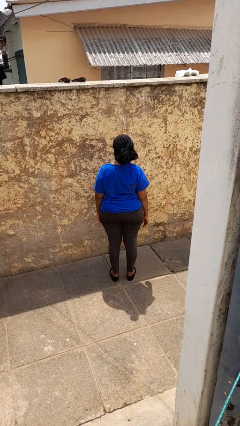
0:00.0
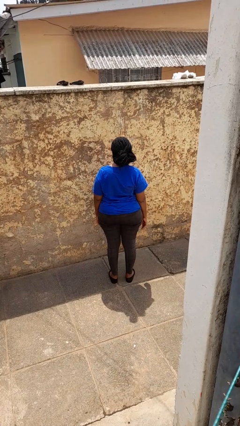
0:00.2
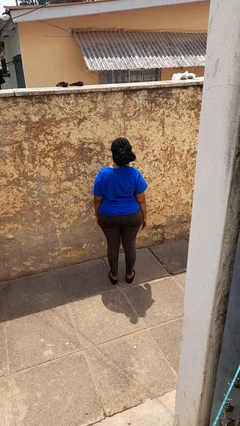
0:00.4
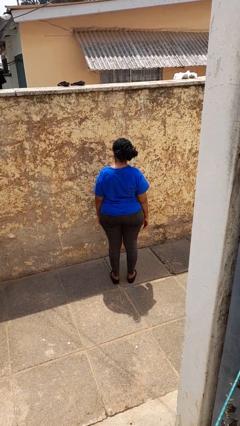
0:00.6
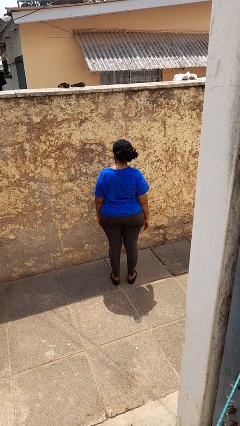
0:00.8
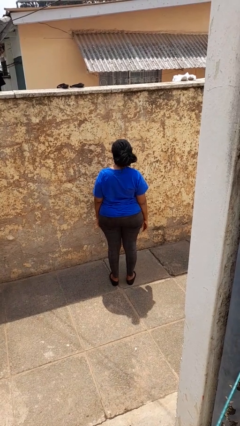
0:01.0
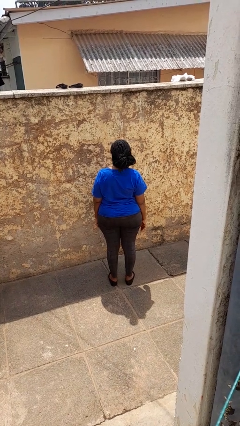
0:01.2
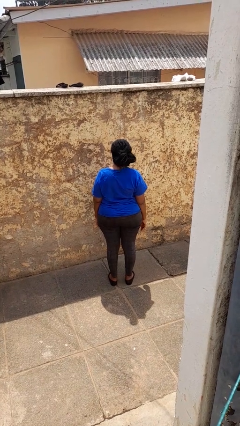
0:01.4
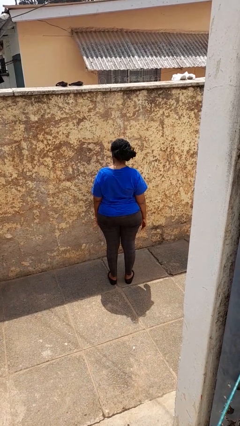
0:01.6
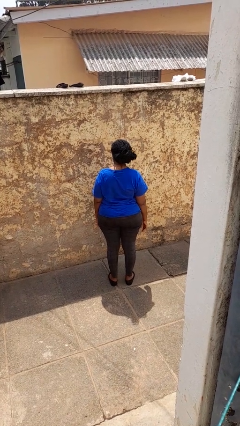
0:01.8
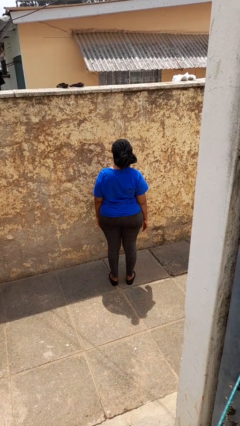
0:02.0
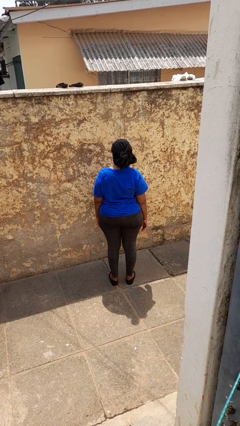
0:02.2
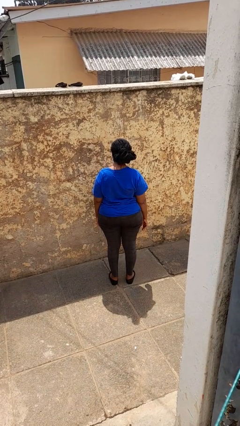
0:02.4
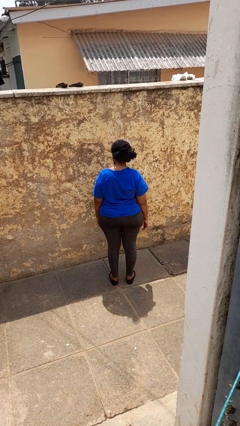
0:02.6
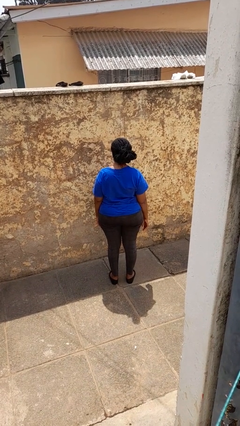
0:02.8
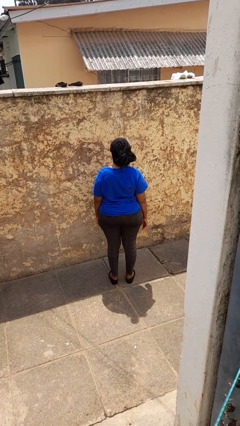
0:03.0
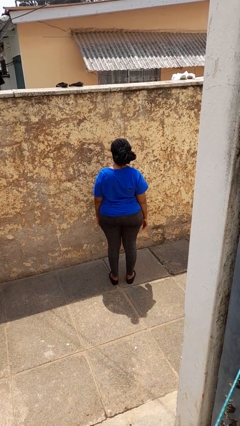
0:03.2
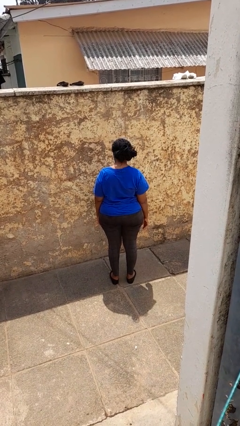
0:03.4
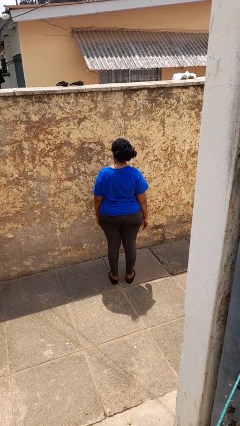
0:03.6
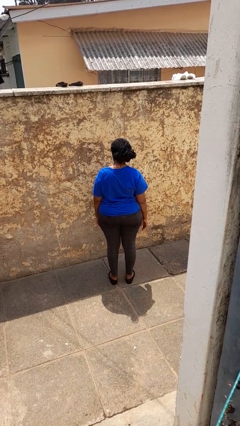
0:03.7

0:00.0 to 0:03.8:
person nods head

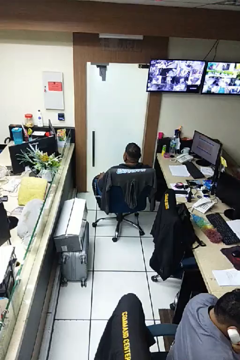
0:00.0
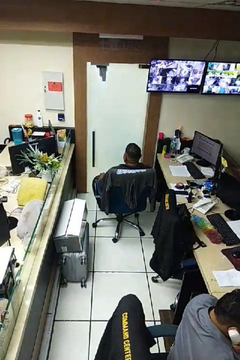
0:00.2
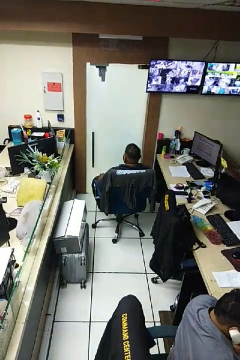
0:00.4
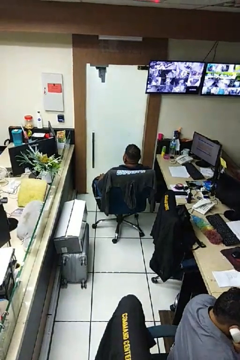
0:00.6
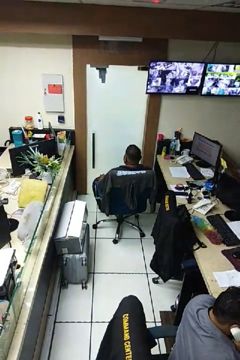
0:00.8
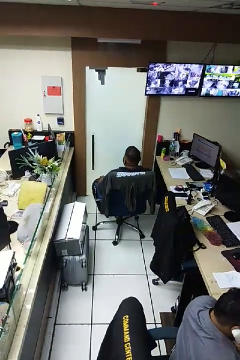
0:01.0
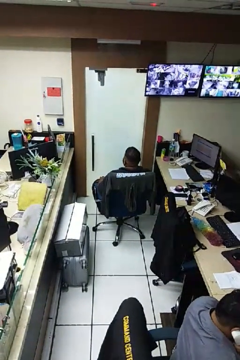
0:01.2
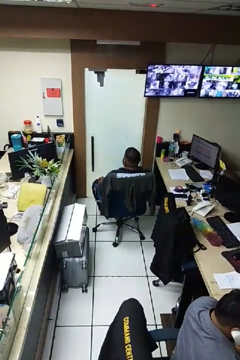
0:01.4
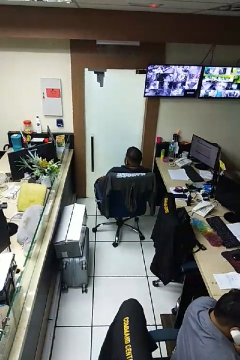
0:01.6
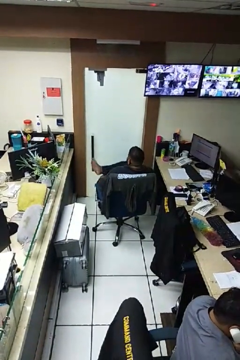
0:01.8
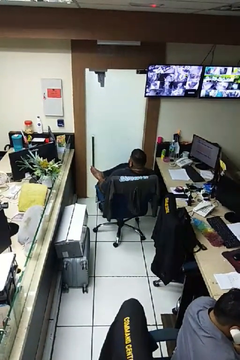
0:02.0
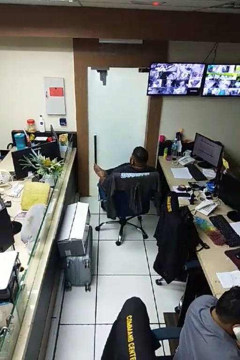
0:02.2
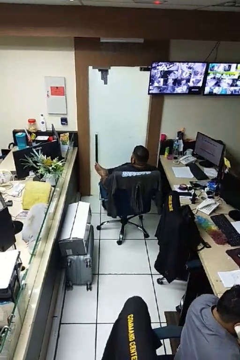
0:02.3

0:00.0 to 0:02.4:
person crosses legs

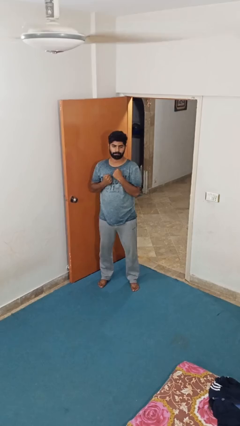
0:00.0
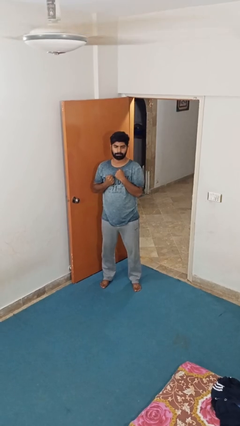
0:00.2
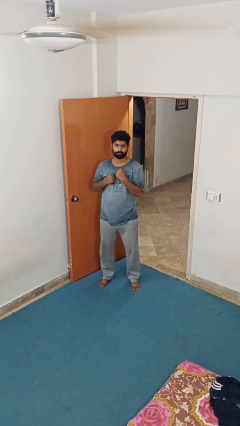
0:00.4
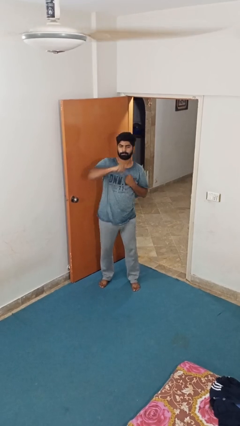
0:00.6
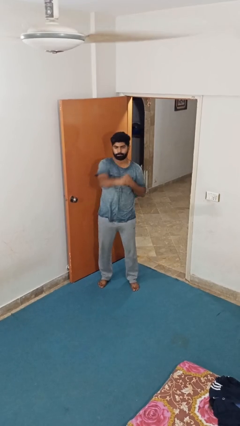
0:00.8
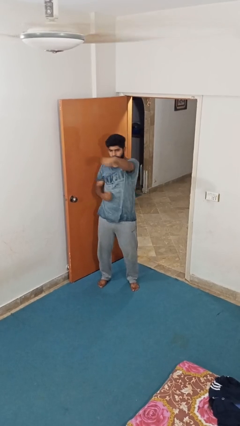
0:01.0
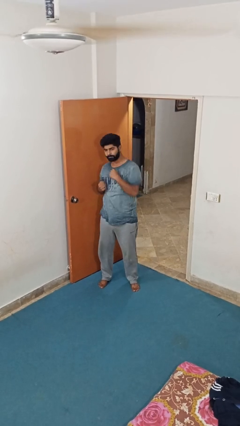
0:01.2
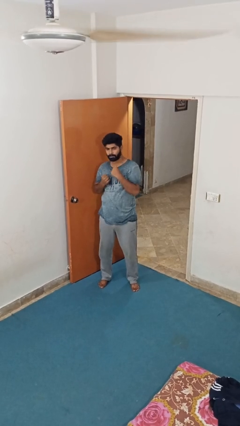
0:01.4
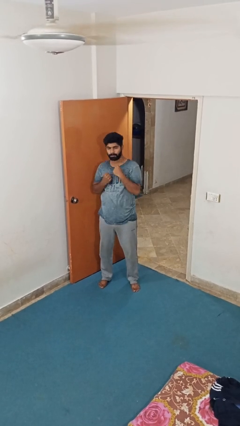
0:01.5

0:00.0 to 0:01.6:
person punches

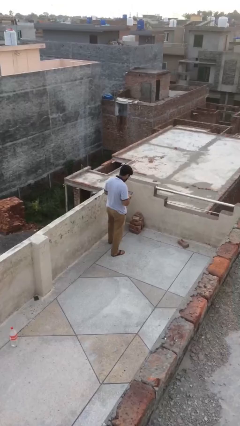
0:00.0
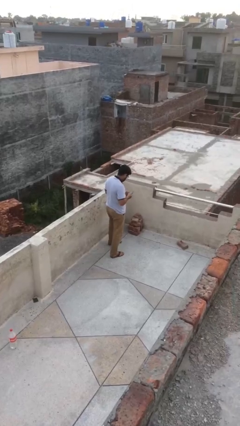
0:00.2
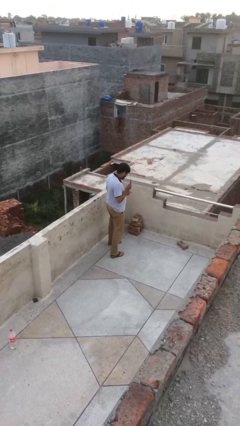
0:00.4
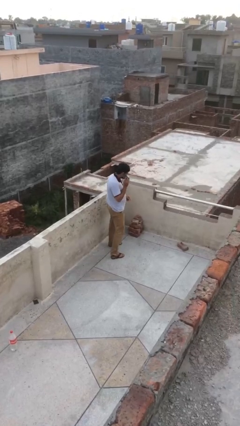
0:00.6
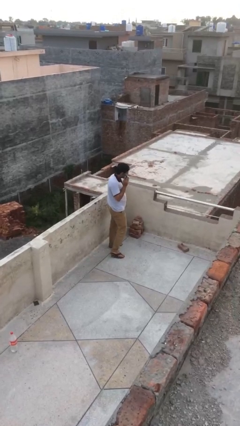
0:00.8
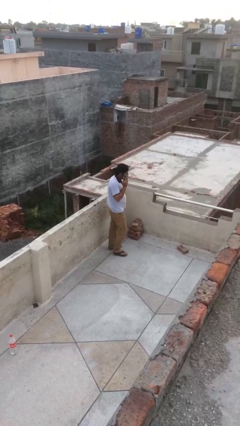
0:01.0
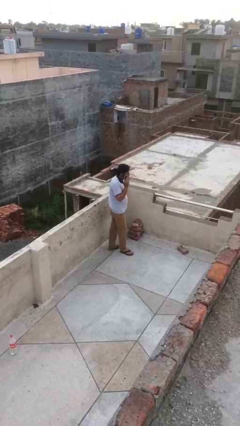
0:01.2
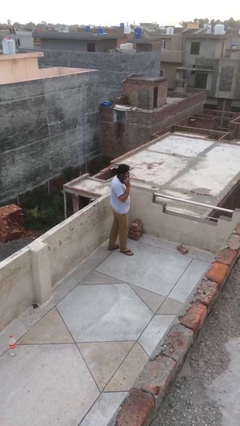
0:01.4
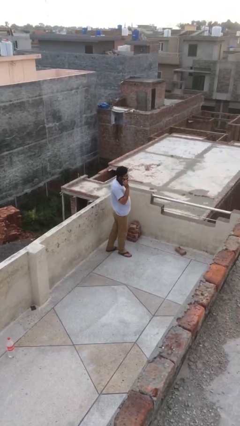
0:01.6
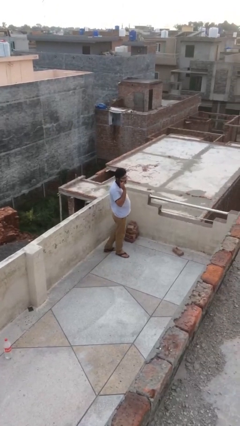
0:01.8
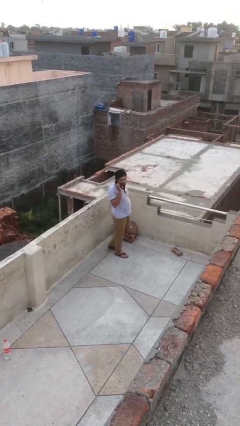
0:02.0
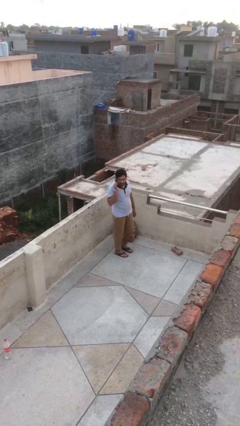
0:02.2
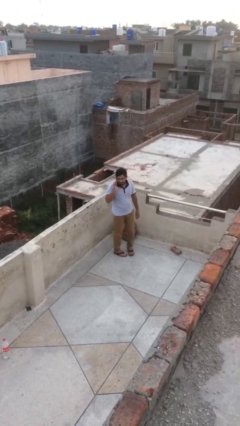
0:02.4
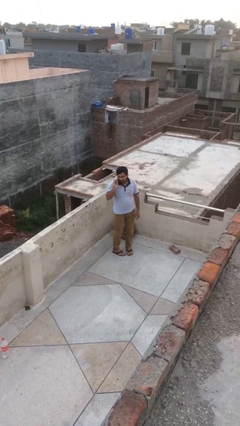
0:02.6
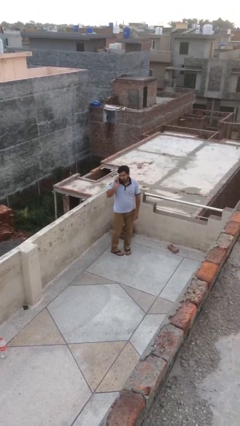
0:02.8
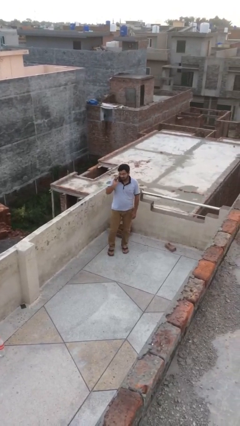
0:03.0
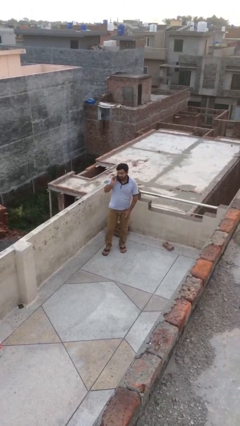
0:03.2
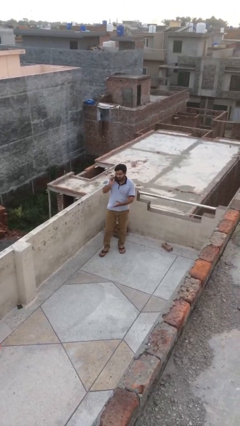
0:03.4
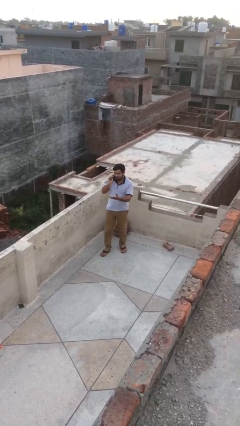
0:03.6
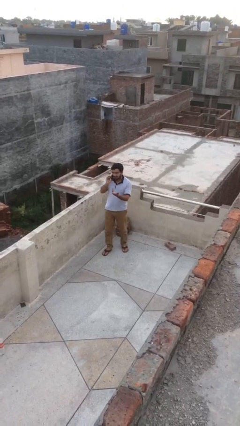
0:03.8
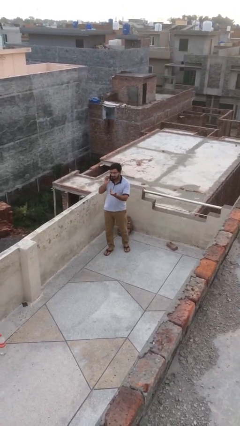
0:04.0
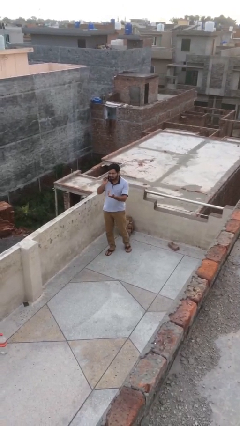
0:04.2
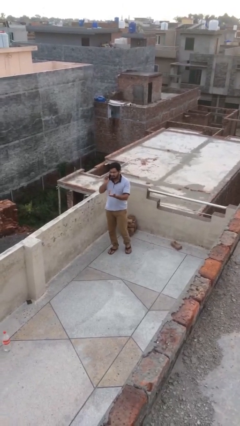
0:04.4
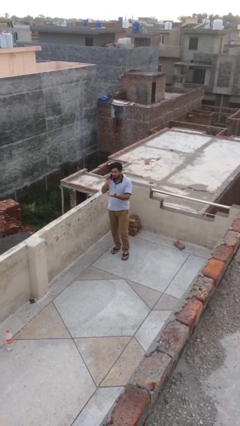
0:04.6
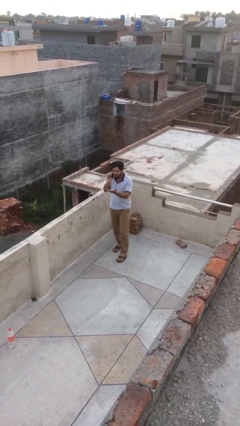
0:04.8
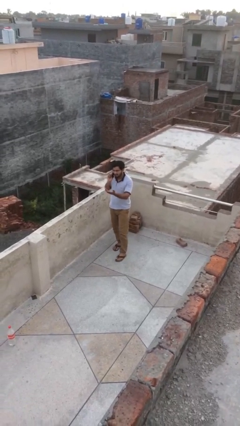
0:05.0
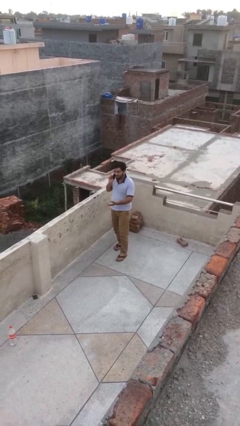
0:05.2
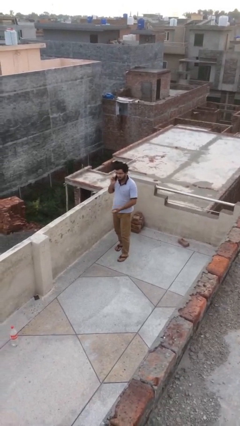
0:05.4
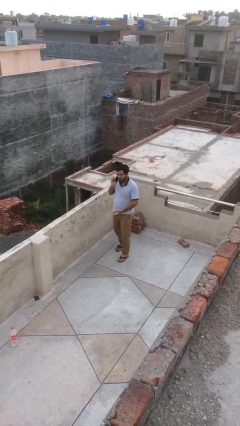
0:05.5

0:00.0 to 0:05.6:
person talks on phone

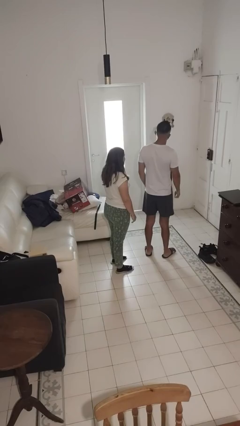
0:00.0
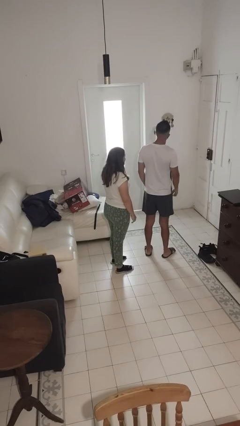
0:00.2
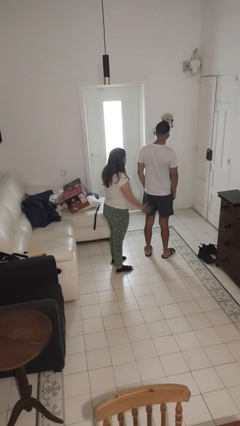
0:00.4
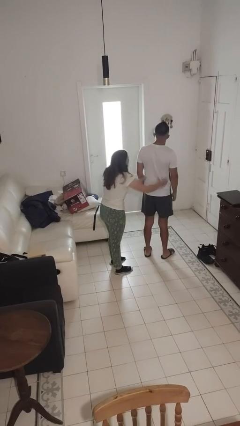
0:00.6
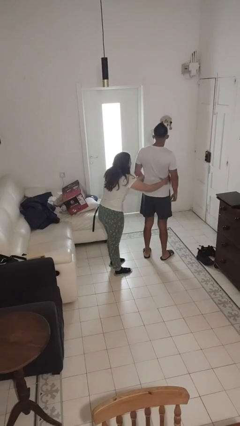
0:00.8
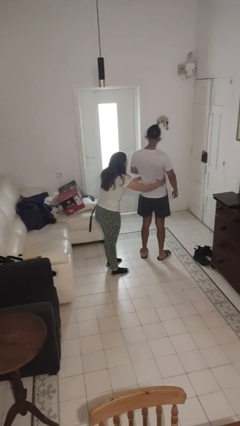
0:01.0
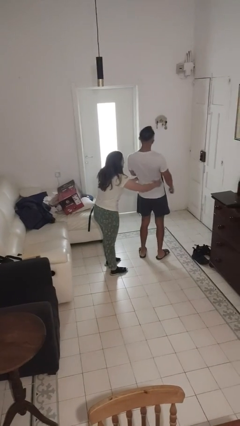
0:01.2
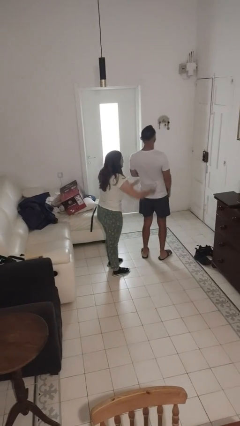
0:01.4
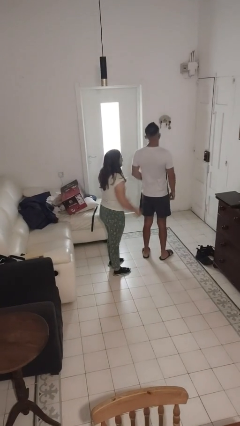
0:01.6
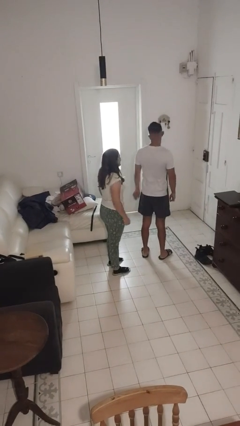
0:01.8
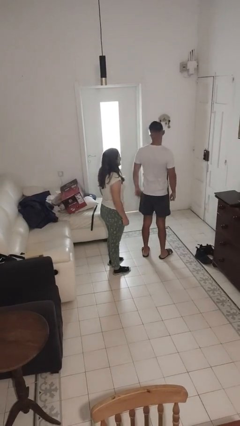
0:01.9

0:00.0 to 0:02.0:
person tickles person

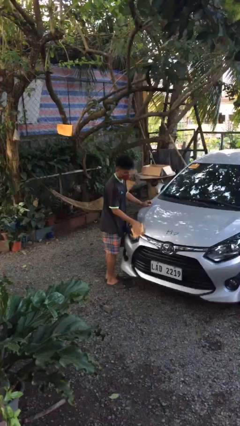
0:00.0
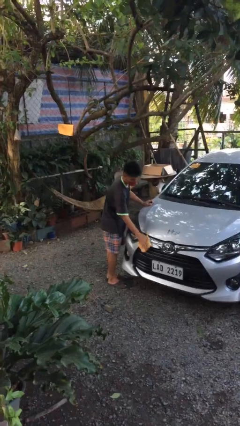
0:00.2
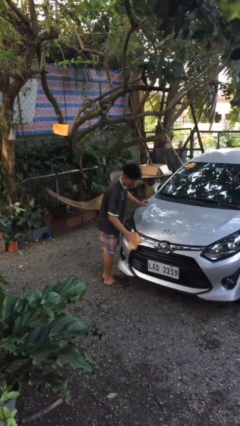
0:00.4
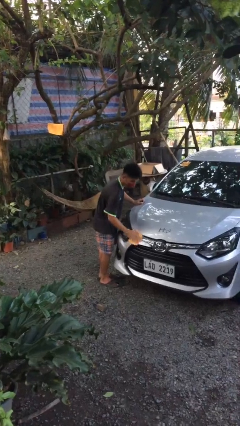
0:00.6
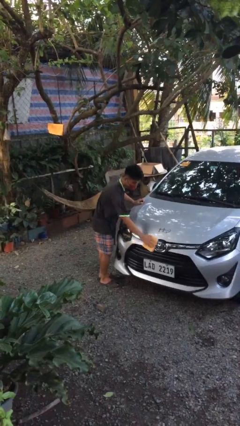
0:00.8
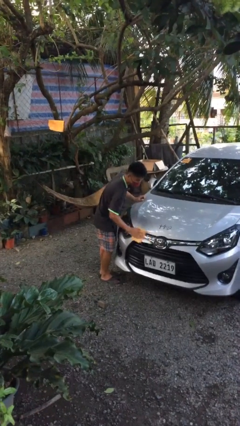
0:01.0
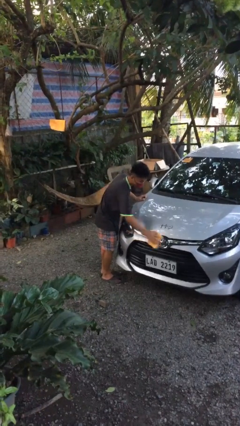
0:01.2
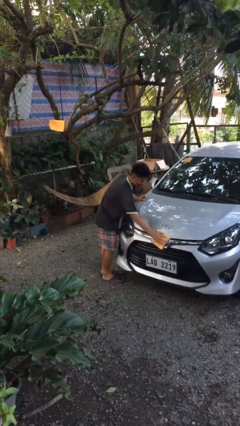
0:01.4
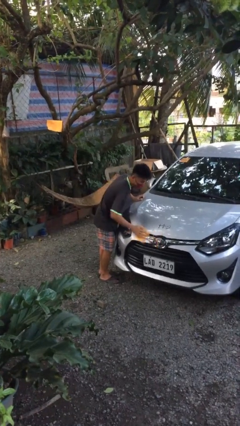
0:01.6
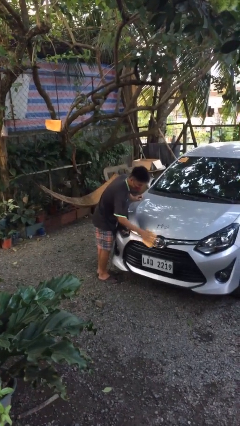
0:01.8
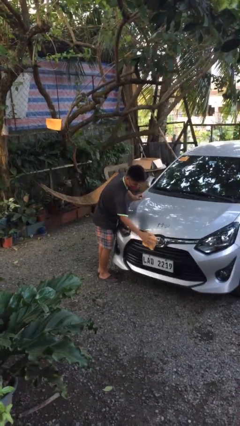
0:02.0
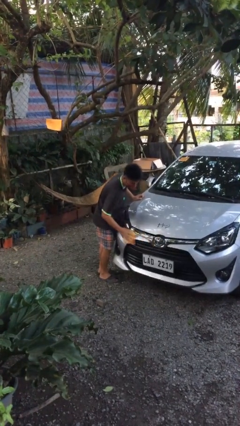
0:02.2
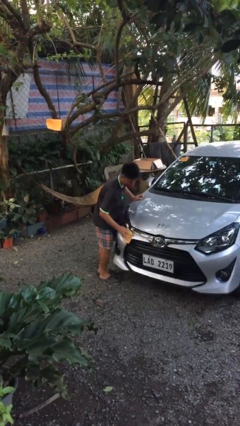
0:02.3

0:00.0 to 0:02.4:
person polishes car with rag

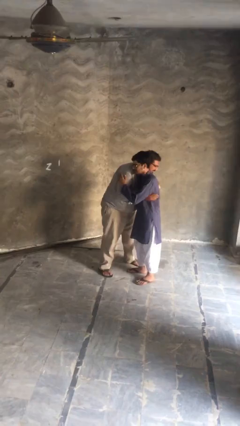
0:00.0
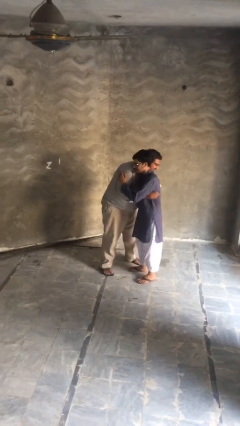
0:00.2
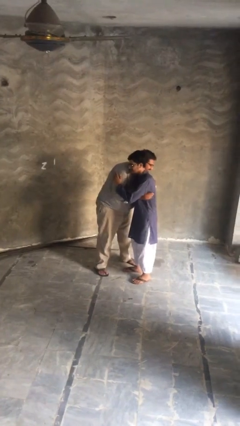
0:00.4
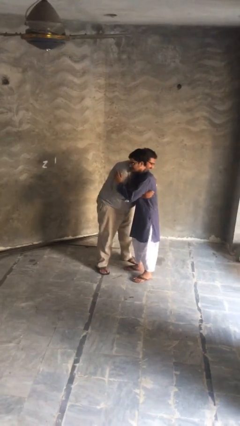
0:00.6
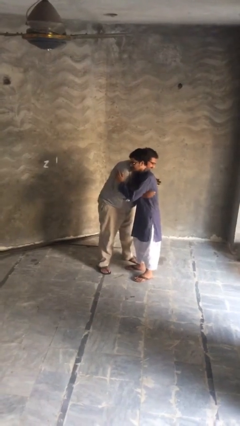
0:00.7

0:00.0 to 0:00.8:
person embraces person
